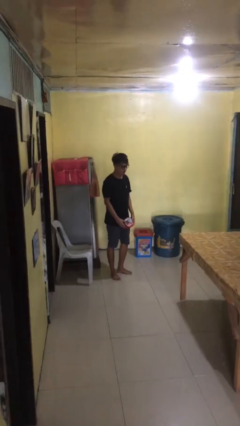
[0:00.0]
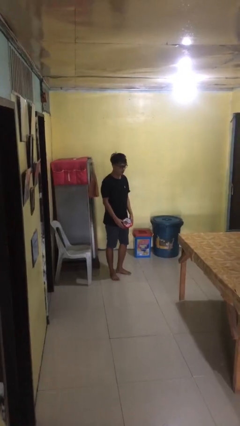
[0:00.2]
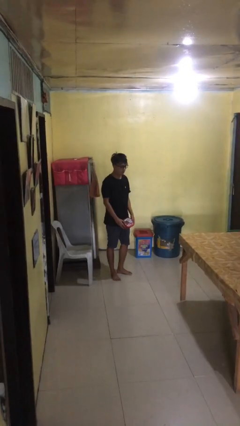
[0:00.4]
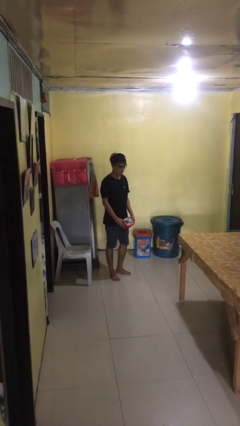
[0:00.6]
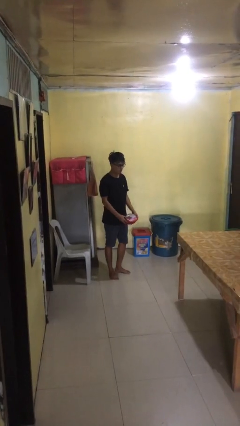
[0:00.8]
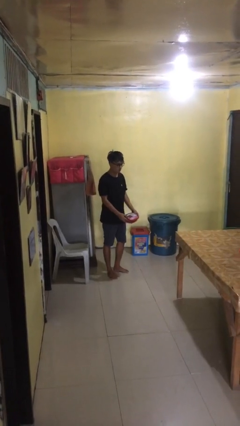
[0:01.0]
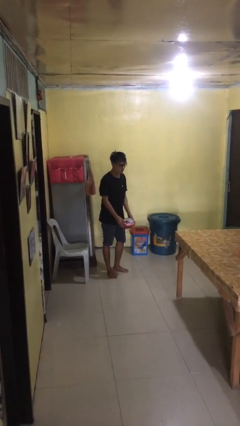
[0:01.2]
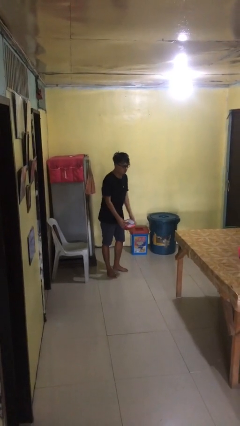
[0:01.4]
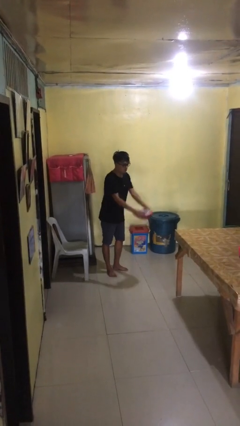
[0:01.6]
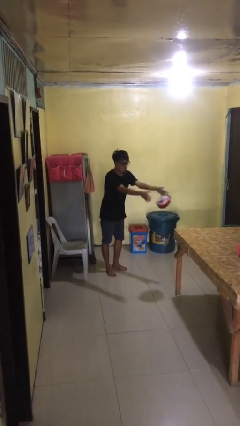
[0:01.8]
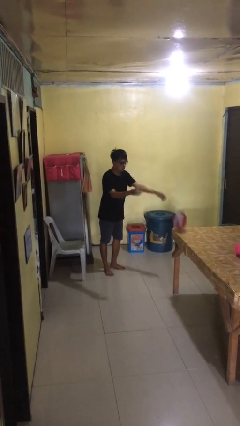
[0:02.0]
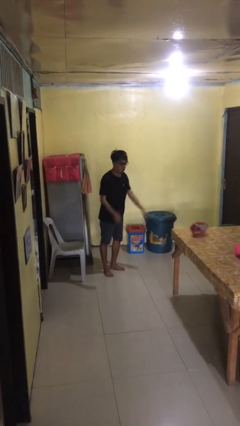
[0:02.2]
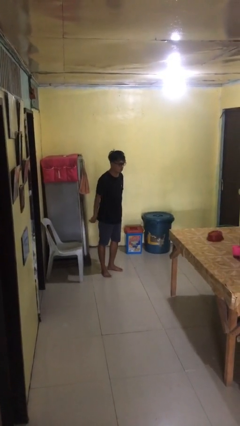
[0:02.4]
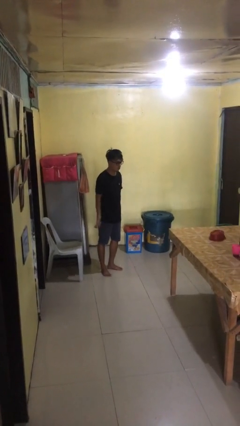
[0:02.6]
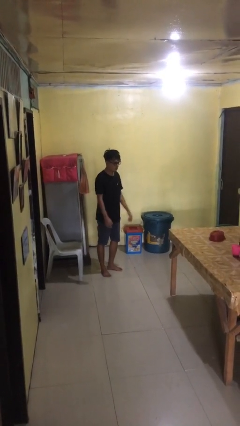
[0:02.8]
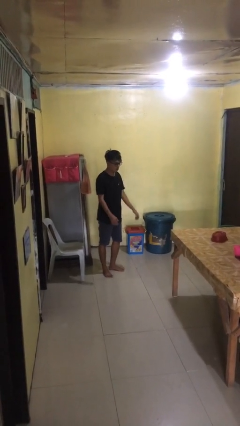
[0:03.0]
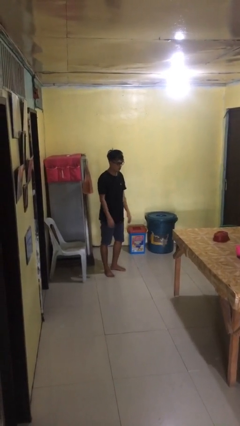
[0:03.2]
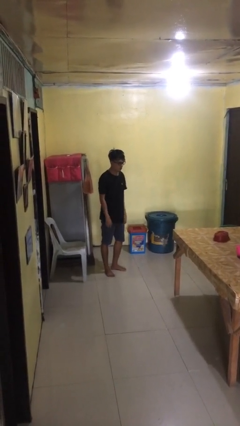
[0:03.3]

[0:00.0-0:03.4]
person throws object on table

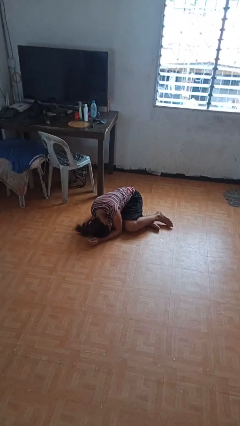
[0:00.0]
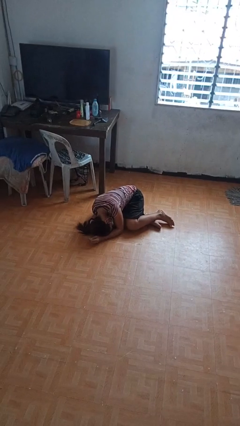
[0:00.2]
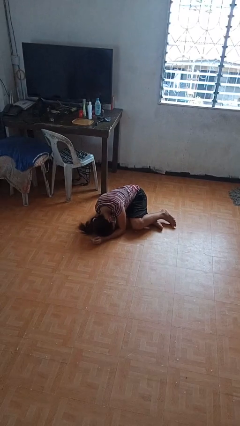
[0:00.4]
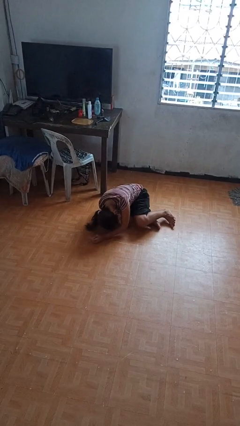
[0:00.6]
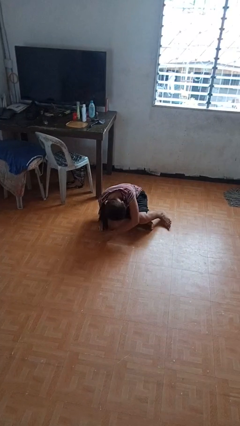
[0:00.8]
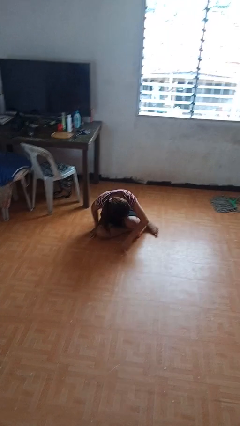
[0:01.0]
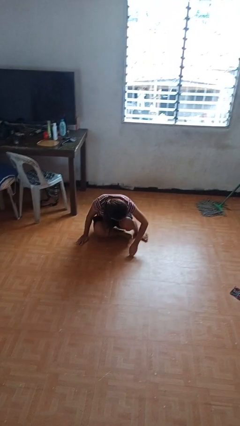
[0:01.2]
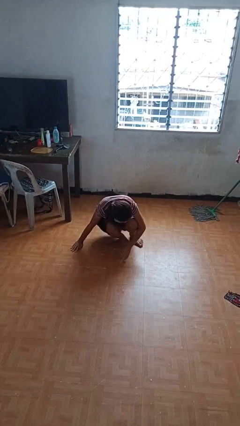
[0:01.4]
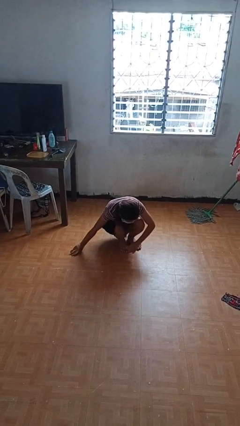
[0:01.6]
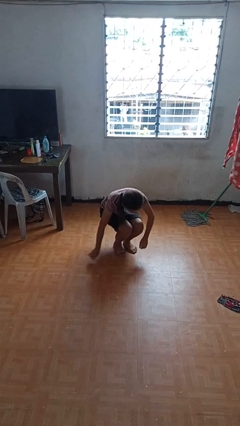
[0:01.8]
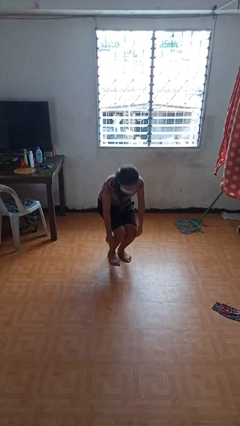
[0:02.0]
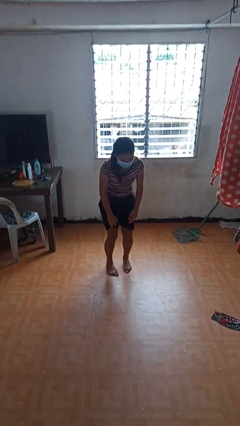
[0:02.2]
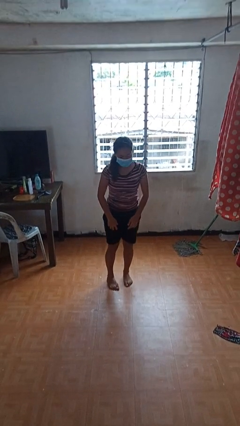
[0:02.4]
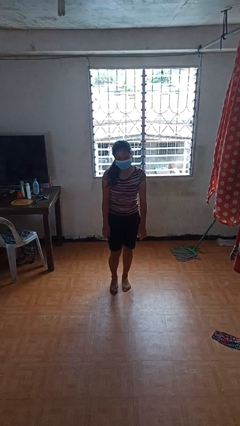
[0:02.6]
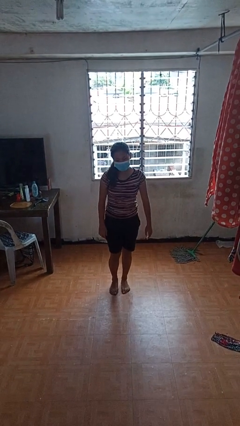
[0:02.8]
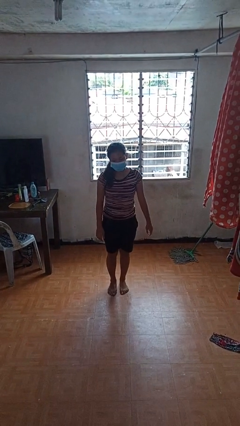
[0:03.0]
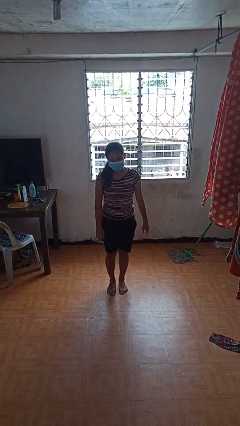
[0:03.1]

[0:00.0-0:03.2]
person stands up from floor

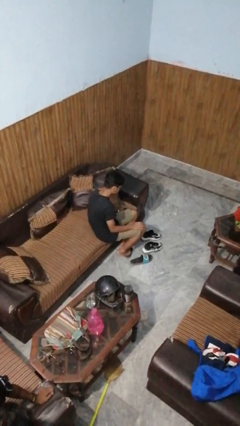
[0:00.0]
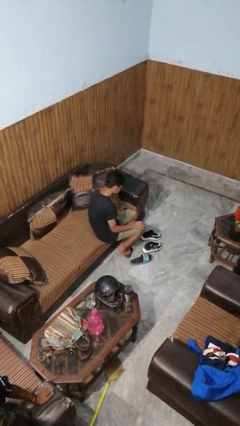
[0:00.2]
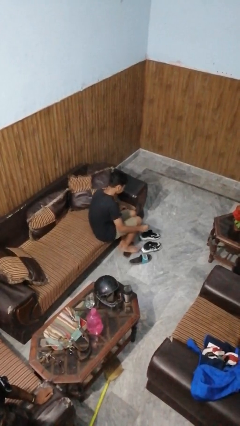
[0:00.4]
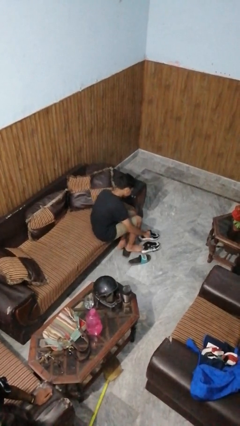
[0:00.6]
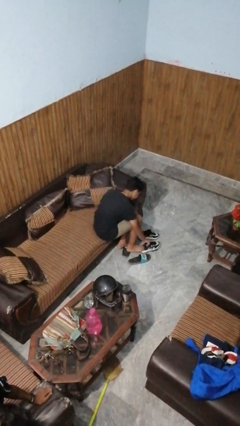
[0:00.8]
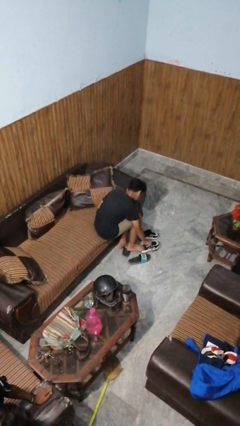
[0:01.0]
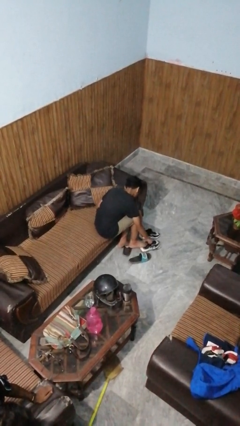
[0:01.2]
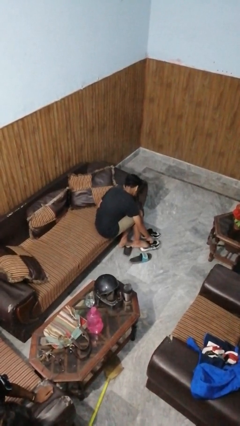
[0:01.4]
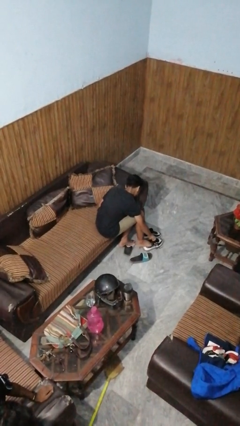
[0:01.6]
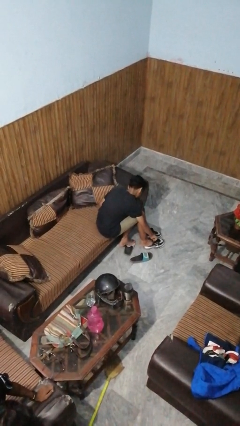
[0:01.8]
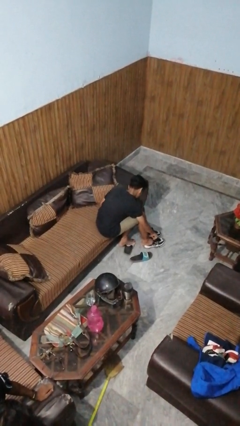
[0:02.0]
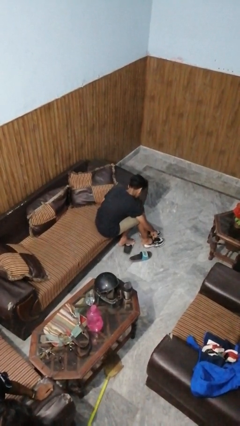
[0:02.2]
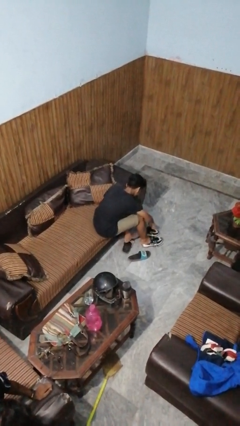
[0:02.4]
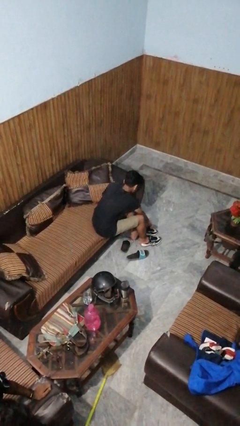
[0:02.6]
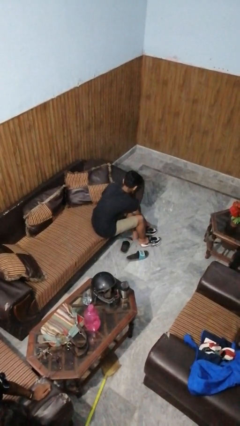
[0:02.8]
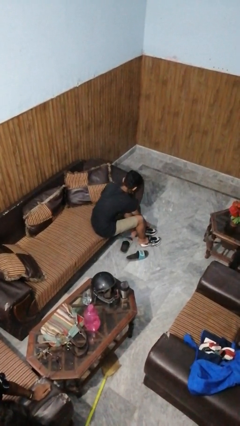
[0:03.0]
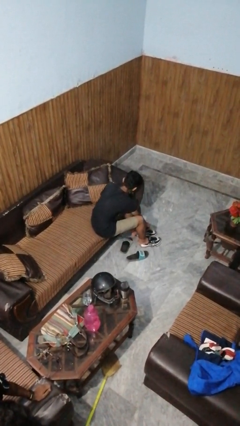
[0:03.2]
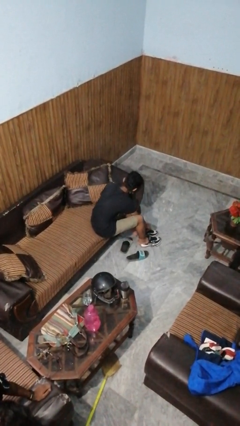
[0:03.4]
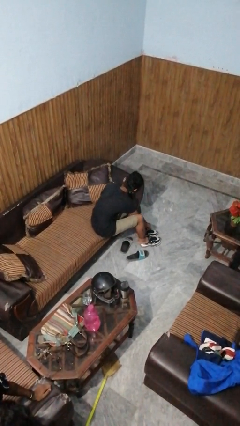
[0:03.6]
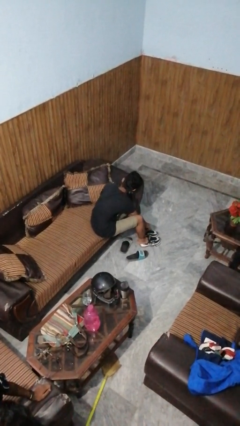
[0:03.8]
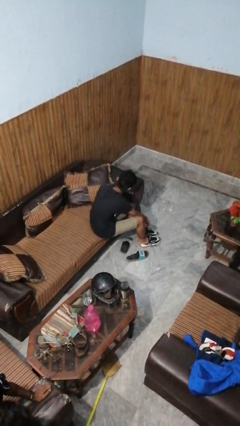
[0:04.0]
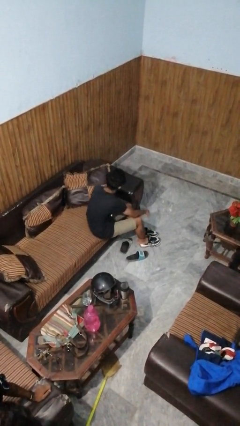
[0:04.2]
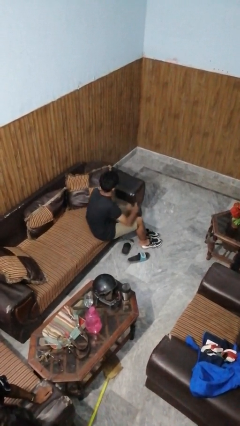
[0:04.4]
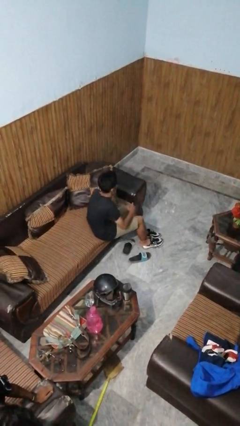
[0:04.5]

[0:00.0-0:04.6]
person puts on shoes

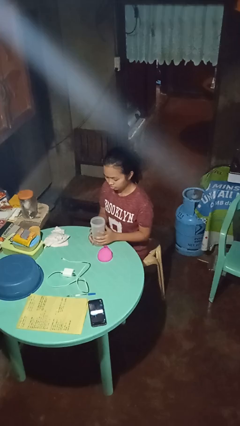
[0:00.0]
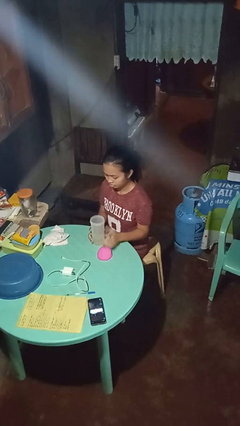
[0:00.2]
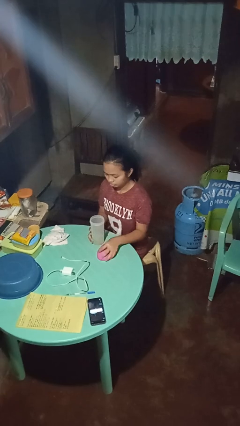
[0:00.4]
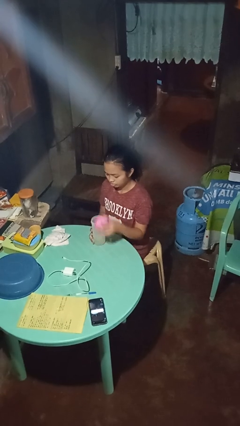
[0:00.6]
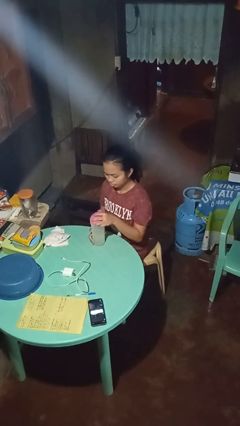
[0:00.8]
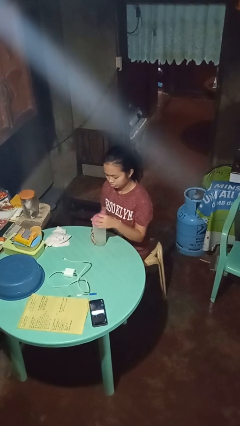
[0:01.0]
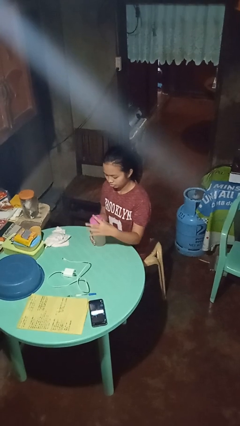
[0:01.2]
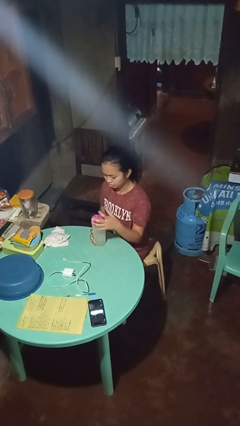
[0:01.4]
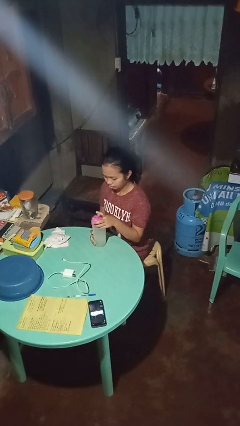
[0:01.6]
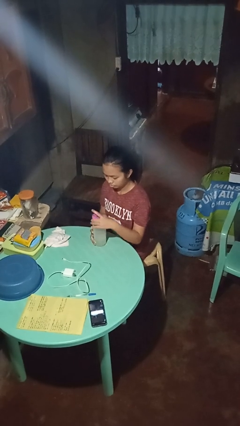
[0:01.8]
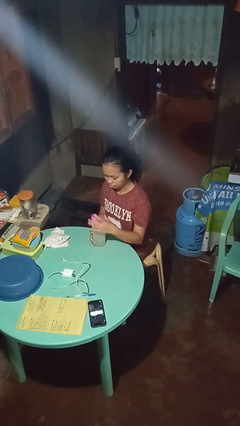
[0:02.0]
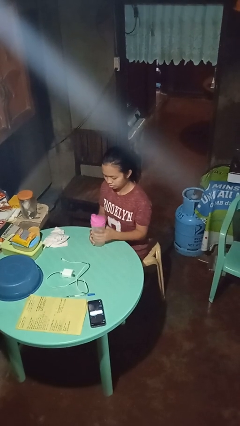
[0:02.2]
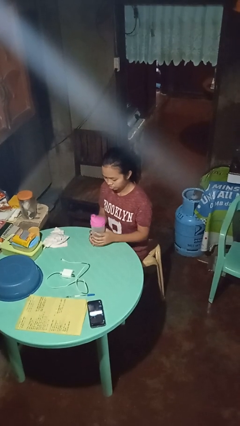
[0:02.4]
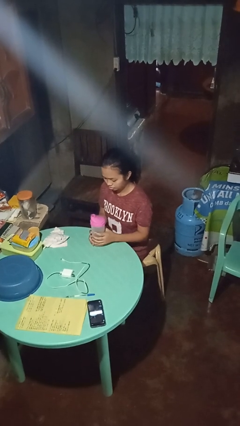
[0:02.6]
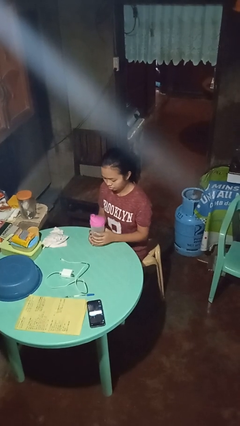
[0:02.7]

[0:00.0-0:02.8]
person screws lid to bottle

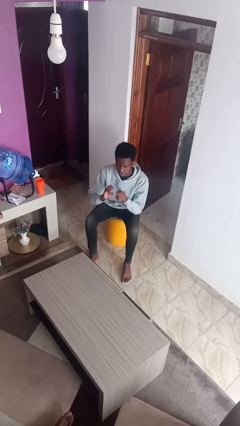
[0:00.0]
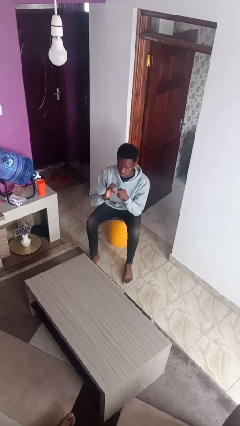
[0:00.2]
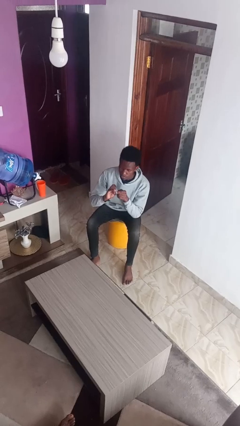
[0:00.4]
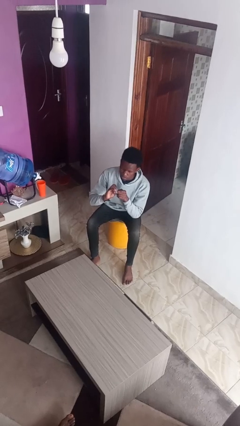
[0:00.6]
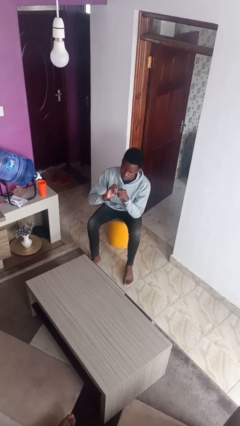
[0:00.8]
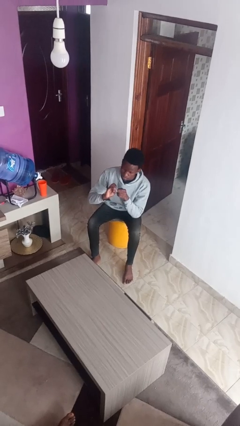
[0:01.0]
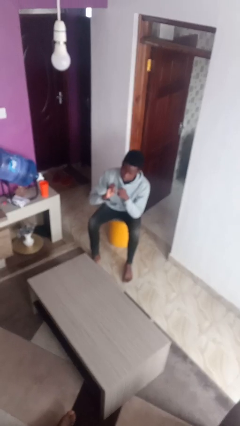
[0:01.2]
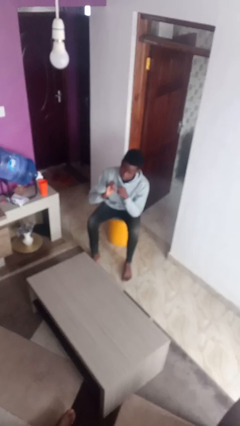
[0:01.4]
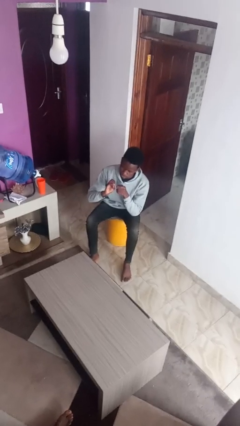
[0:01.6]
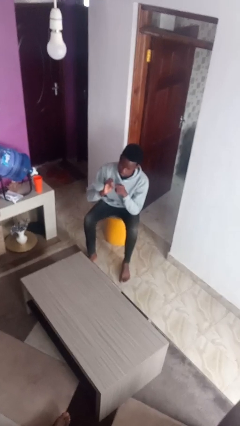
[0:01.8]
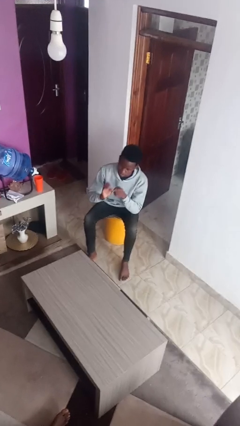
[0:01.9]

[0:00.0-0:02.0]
person files fingernails

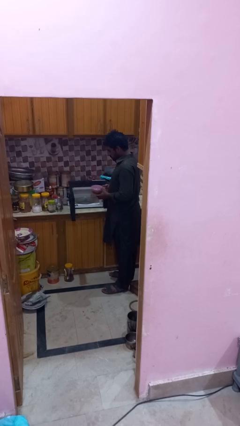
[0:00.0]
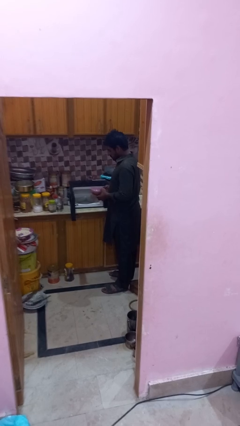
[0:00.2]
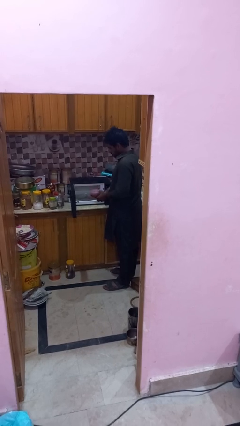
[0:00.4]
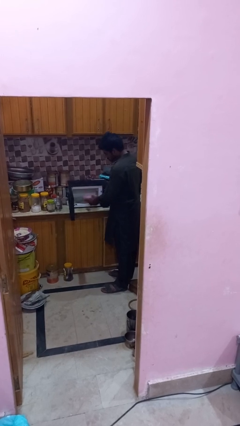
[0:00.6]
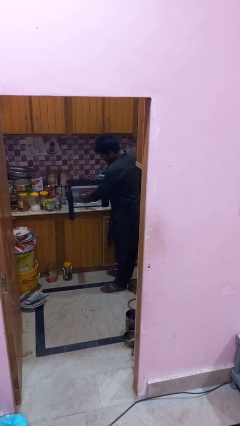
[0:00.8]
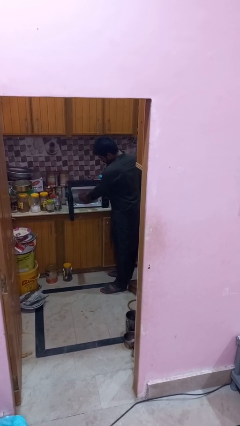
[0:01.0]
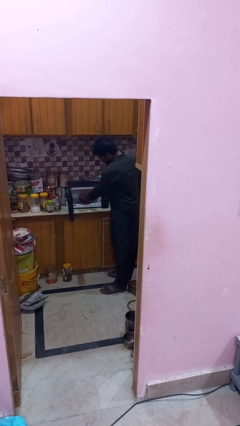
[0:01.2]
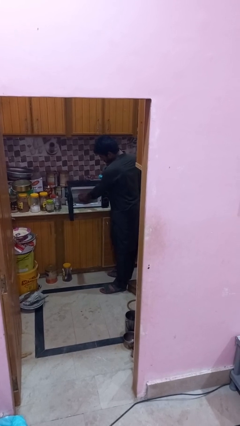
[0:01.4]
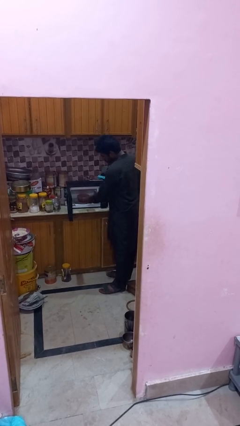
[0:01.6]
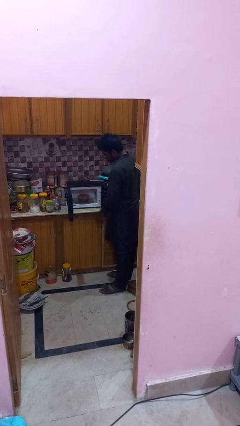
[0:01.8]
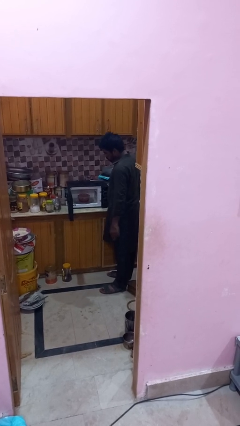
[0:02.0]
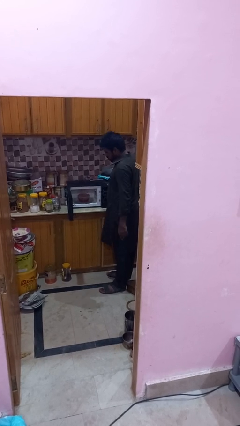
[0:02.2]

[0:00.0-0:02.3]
person puts object into microwave
